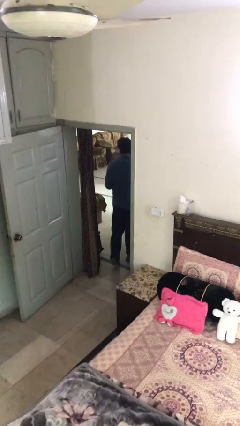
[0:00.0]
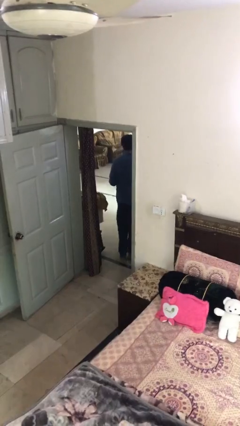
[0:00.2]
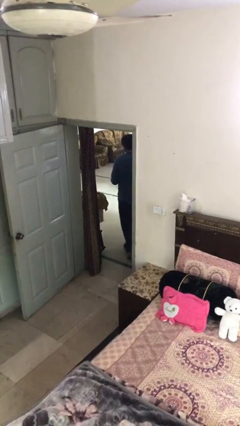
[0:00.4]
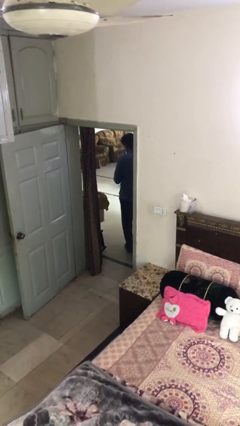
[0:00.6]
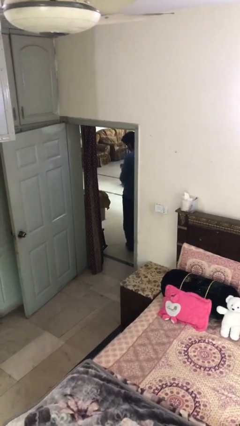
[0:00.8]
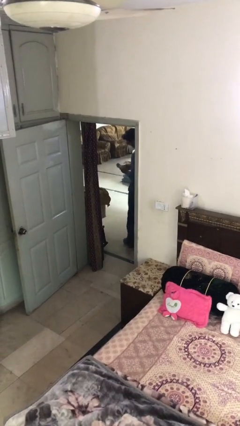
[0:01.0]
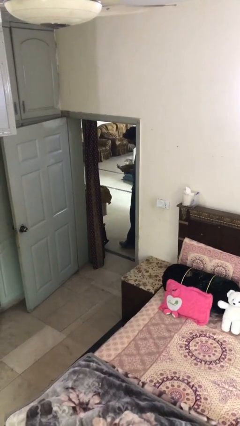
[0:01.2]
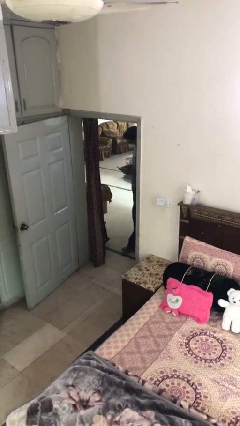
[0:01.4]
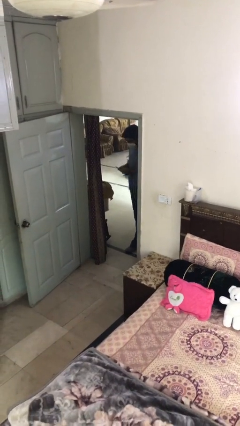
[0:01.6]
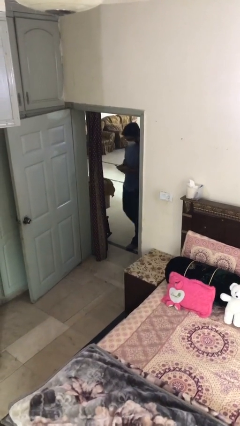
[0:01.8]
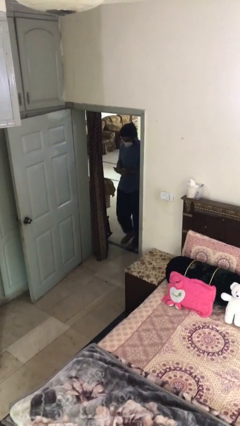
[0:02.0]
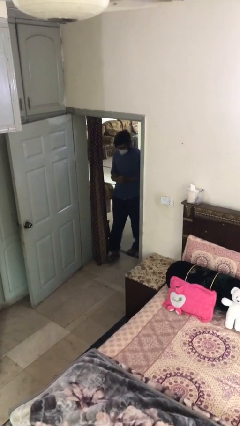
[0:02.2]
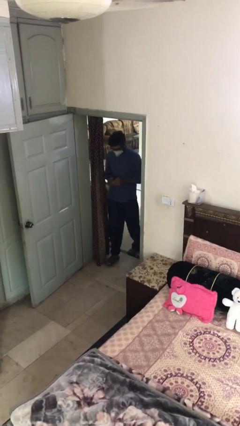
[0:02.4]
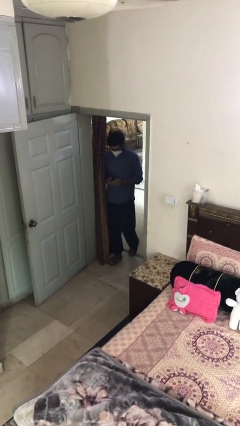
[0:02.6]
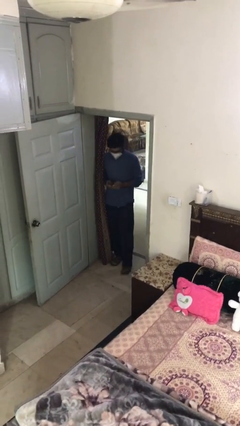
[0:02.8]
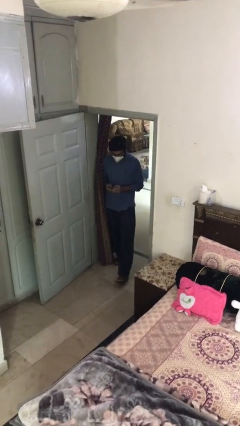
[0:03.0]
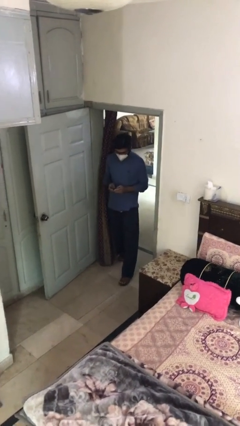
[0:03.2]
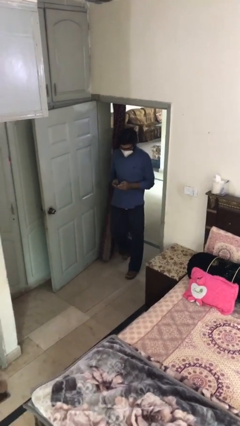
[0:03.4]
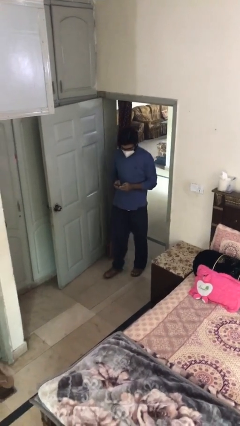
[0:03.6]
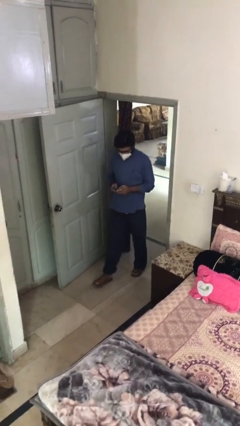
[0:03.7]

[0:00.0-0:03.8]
person enters scene through structure

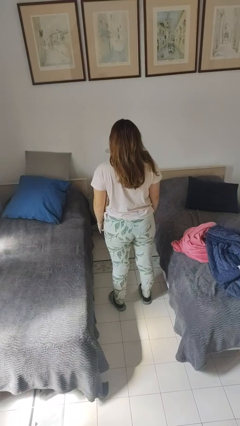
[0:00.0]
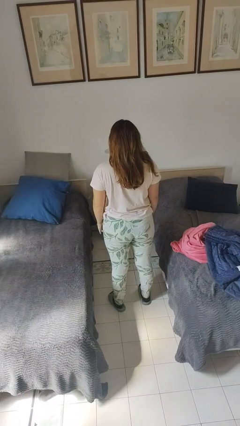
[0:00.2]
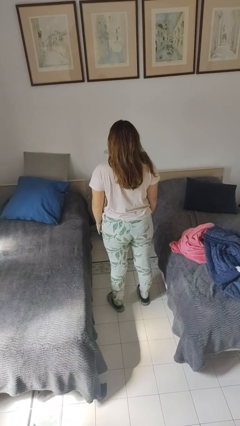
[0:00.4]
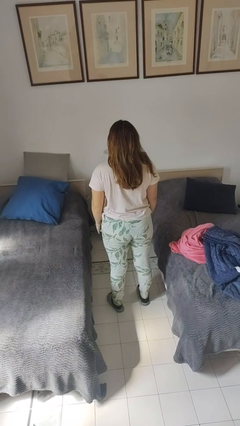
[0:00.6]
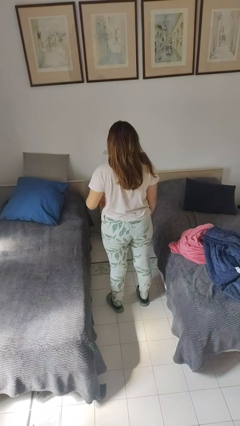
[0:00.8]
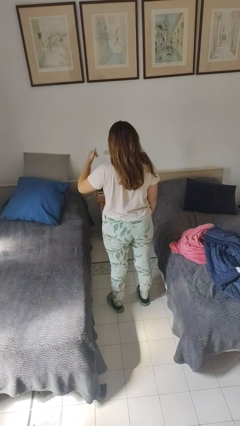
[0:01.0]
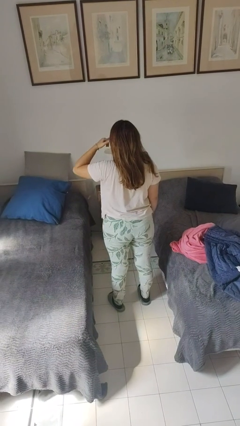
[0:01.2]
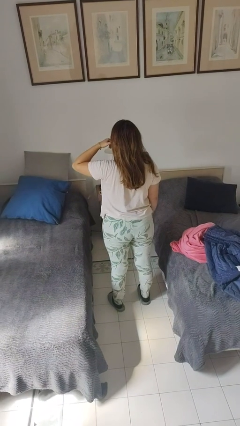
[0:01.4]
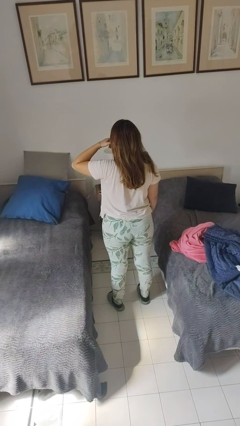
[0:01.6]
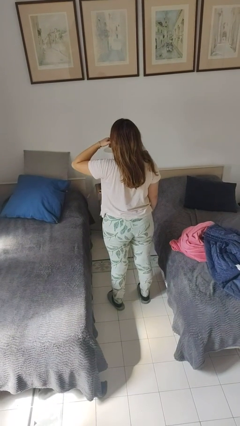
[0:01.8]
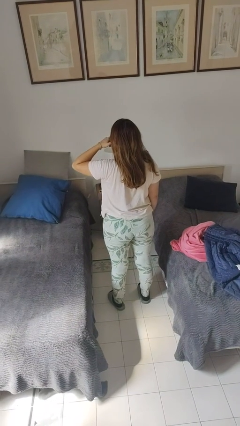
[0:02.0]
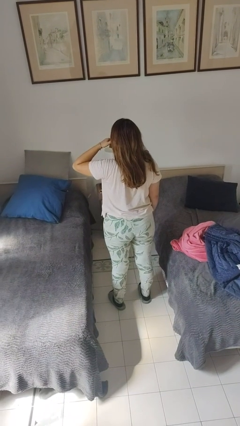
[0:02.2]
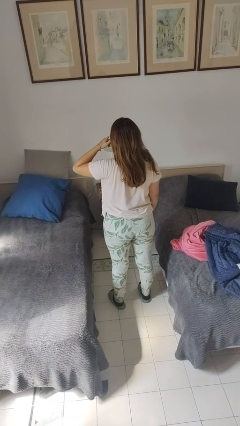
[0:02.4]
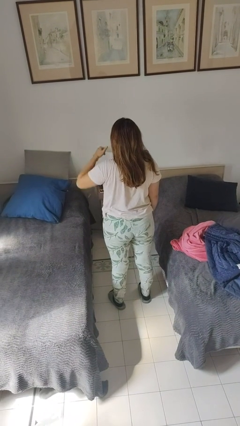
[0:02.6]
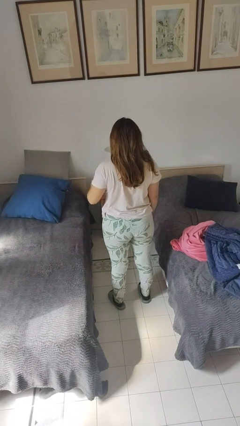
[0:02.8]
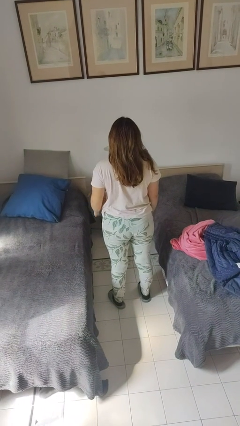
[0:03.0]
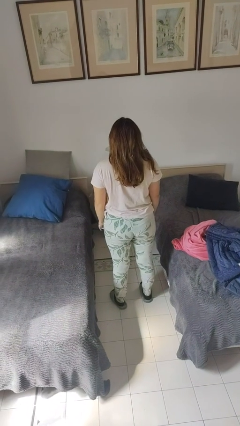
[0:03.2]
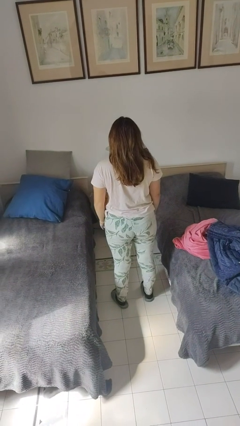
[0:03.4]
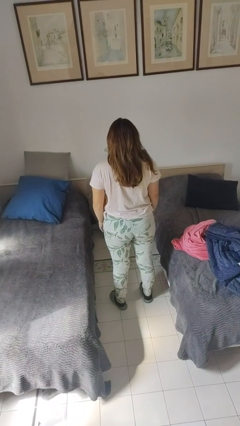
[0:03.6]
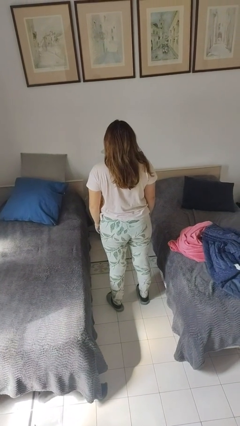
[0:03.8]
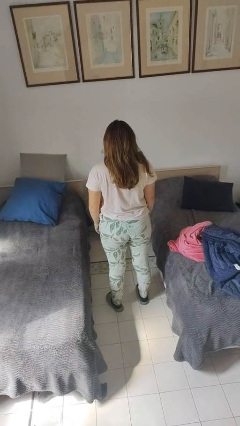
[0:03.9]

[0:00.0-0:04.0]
person gestures call me

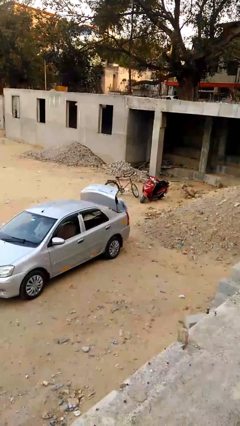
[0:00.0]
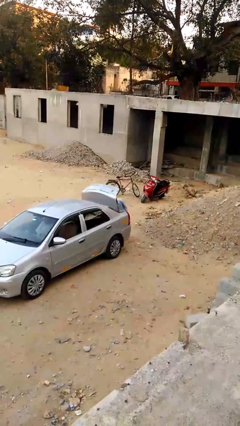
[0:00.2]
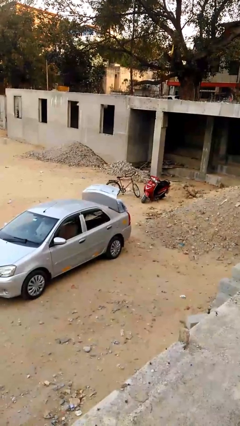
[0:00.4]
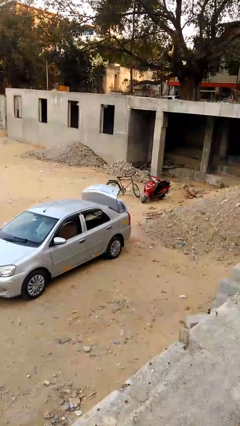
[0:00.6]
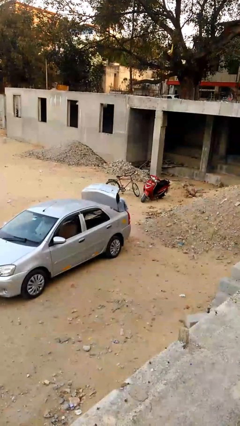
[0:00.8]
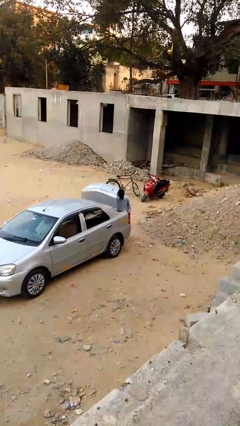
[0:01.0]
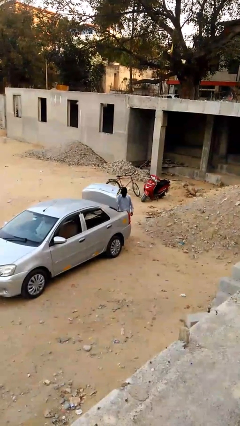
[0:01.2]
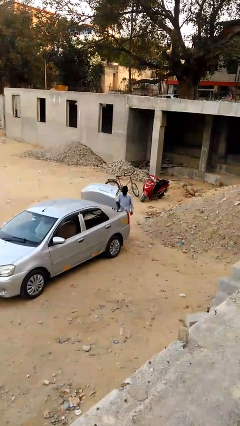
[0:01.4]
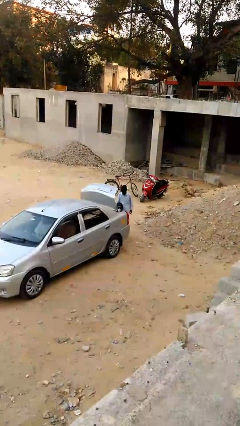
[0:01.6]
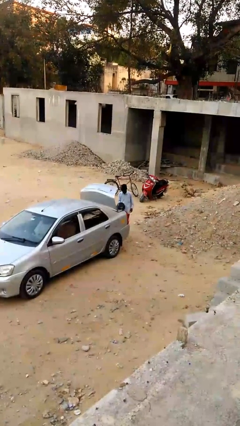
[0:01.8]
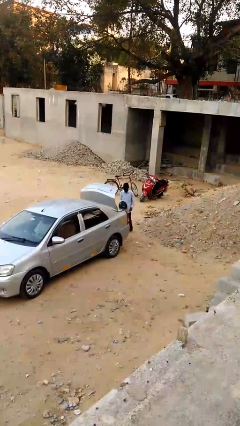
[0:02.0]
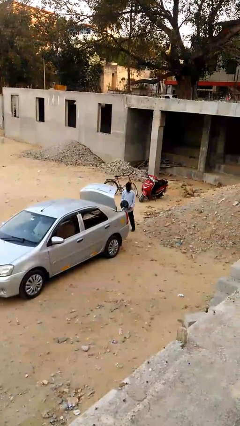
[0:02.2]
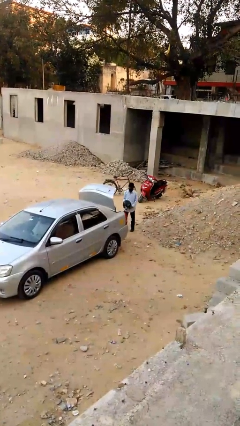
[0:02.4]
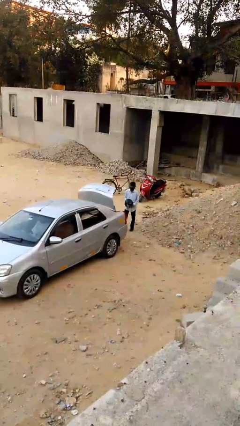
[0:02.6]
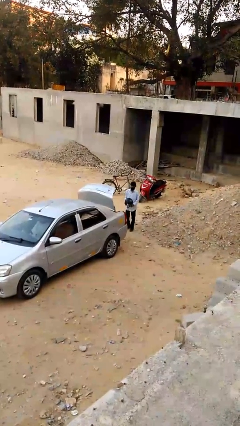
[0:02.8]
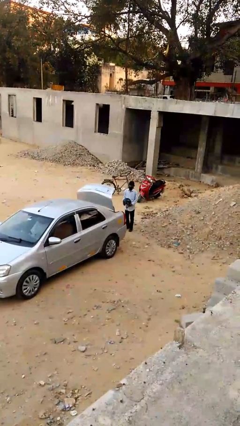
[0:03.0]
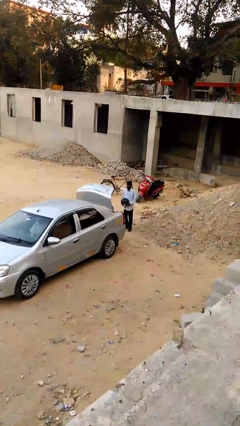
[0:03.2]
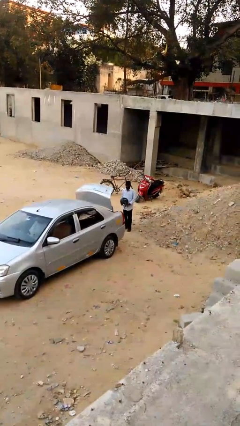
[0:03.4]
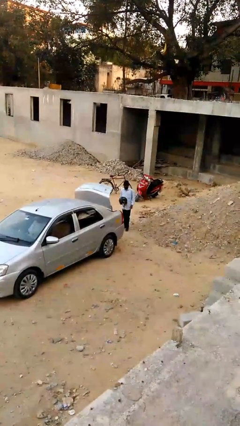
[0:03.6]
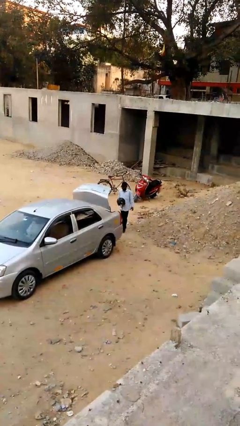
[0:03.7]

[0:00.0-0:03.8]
person unloads car

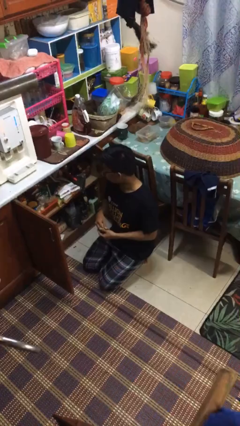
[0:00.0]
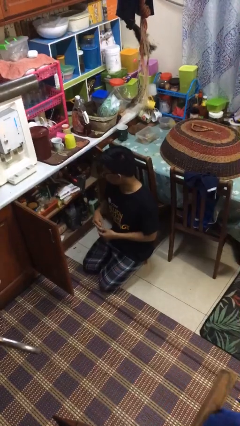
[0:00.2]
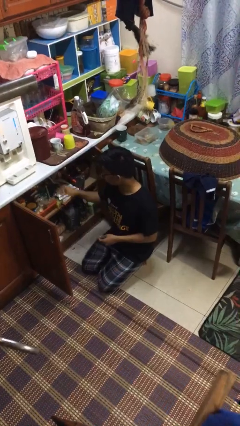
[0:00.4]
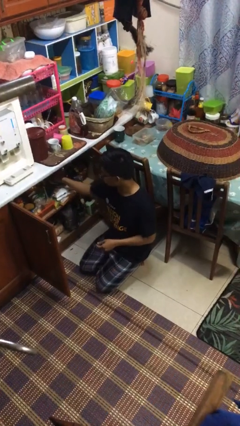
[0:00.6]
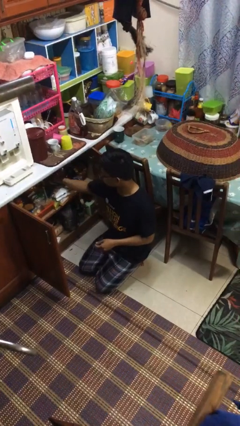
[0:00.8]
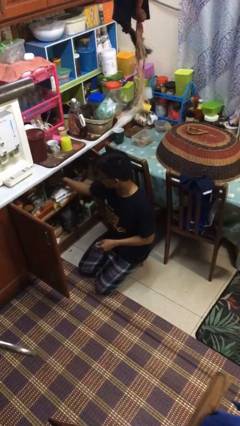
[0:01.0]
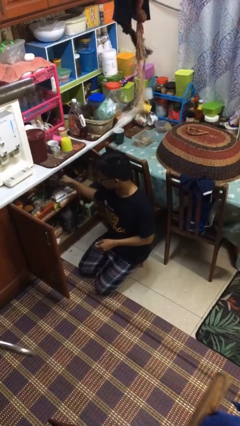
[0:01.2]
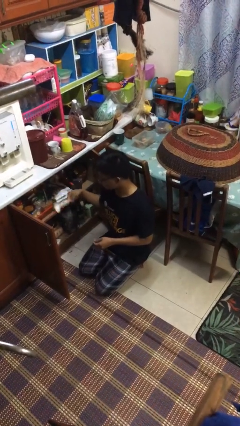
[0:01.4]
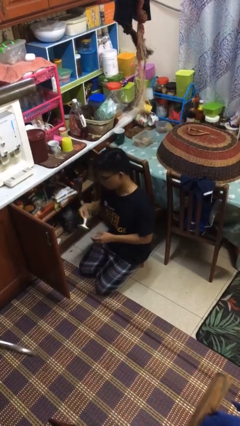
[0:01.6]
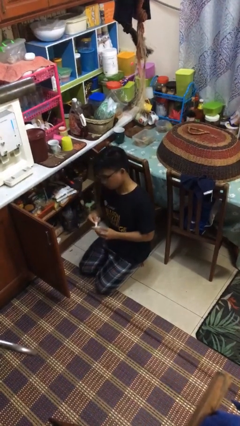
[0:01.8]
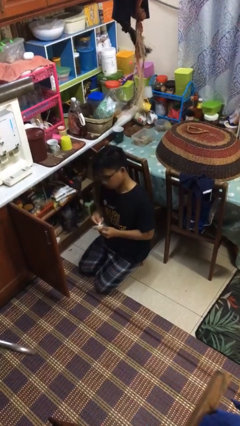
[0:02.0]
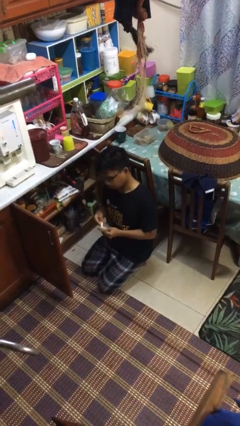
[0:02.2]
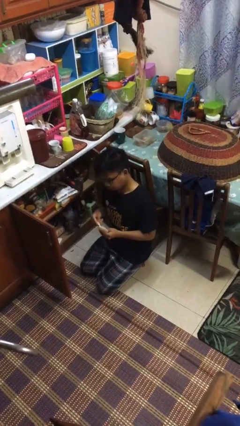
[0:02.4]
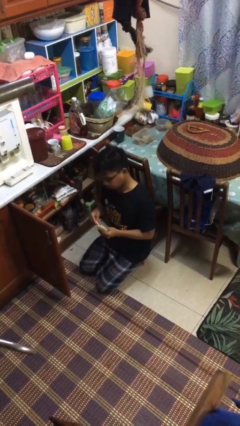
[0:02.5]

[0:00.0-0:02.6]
person takes object from kitchen drawer

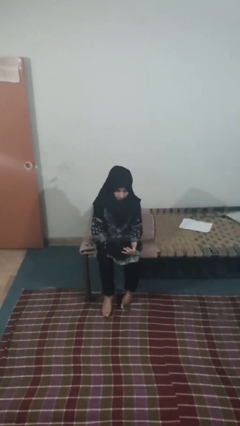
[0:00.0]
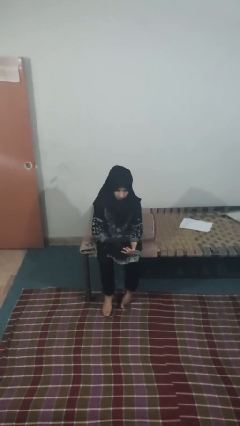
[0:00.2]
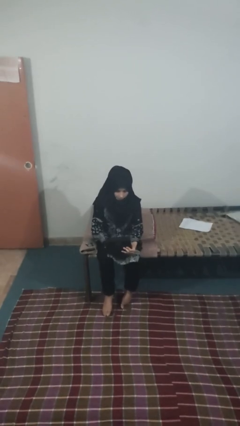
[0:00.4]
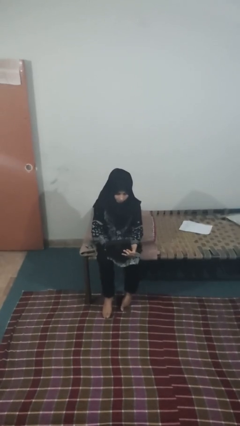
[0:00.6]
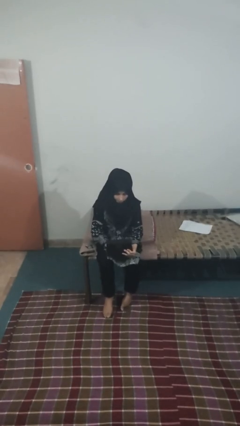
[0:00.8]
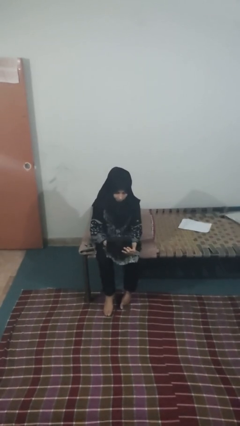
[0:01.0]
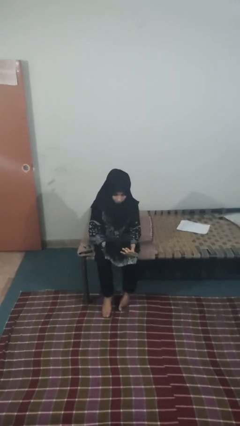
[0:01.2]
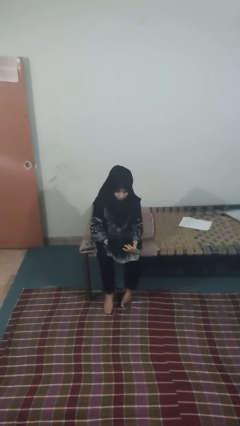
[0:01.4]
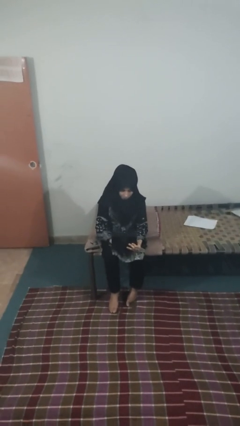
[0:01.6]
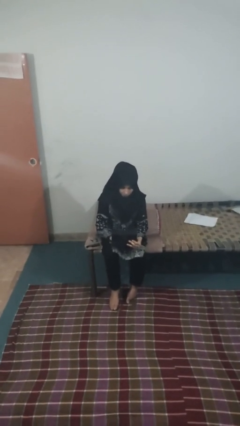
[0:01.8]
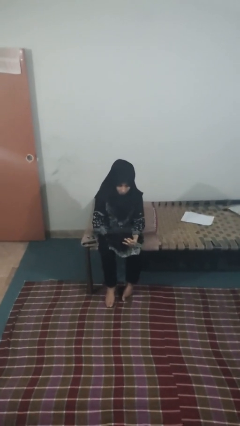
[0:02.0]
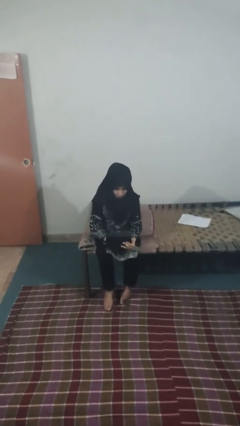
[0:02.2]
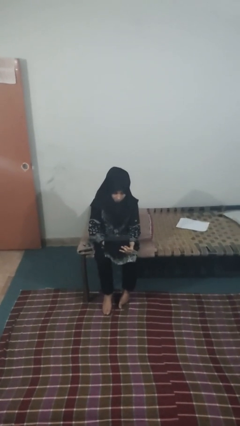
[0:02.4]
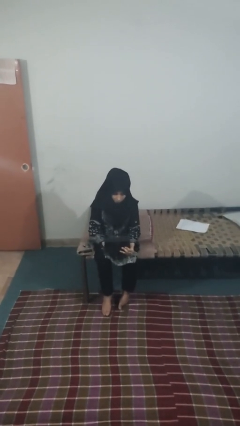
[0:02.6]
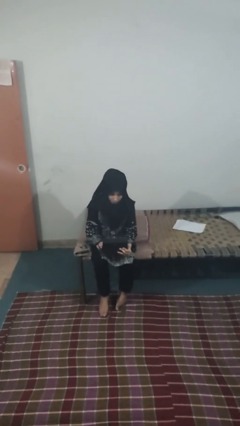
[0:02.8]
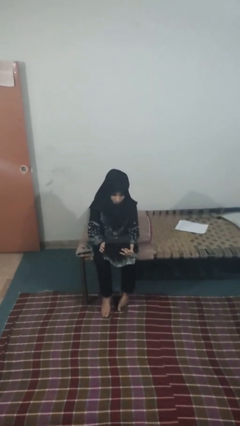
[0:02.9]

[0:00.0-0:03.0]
person searches jewelry box

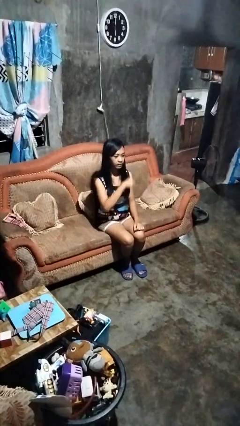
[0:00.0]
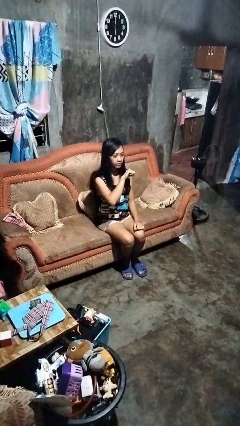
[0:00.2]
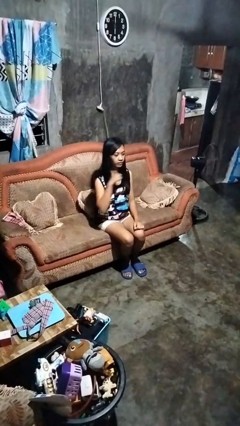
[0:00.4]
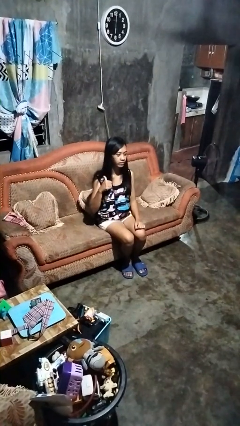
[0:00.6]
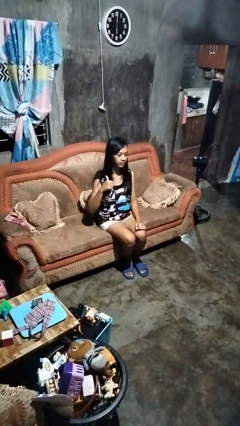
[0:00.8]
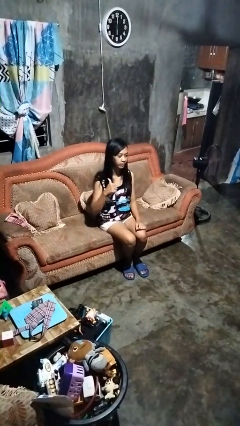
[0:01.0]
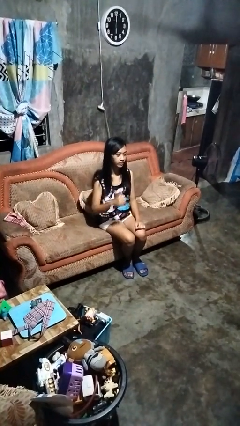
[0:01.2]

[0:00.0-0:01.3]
person gestures cut
